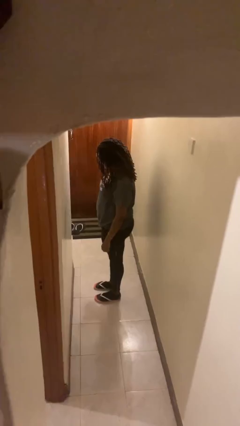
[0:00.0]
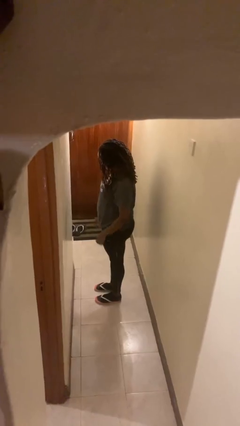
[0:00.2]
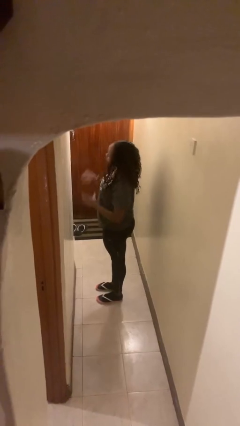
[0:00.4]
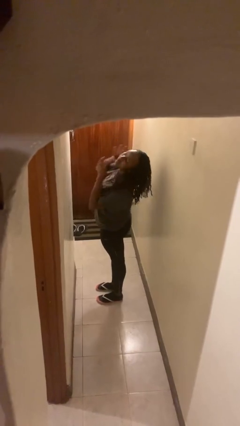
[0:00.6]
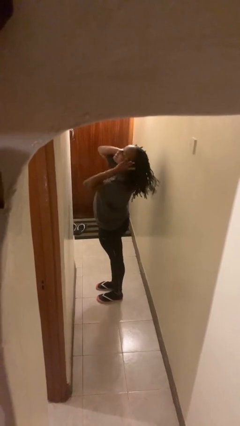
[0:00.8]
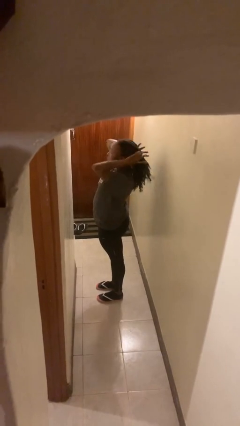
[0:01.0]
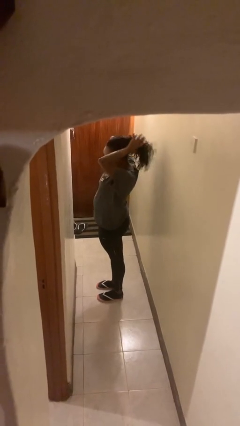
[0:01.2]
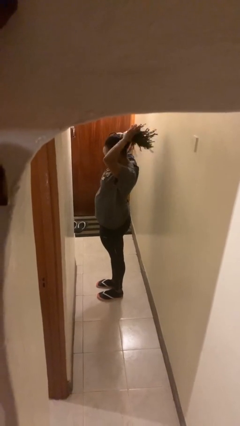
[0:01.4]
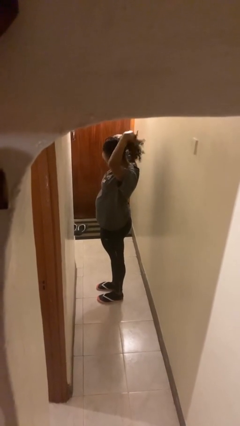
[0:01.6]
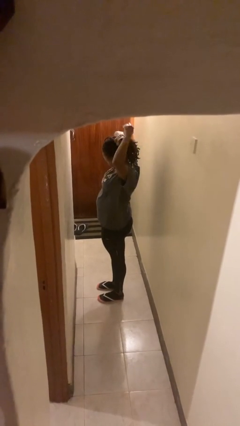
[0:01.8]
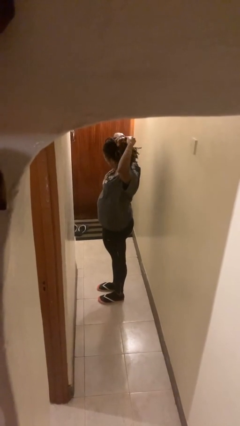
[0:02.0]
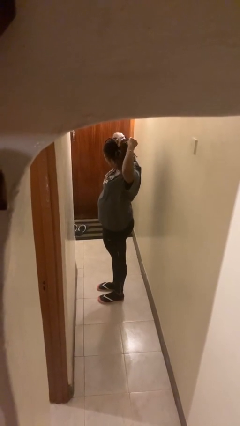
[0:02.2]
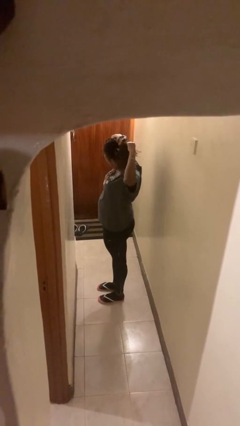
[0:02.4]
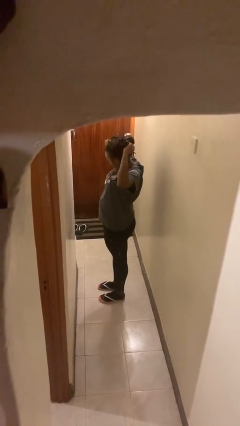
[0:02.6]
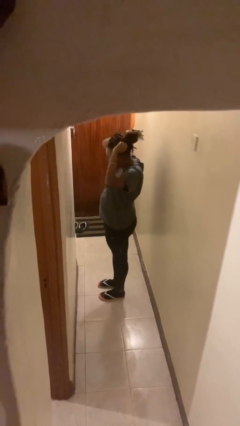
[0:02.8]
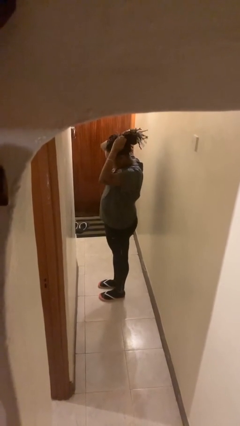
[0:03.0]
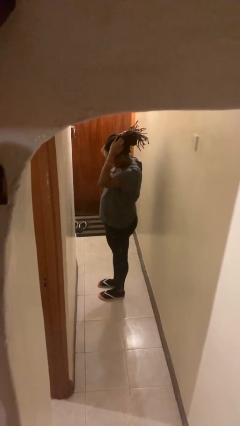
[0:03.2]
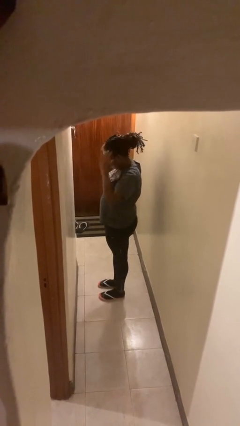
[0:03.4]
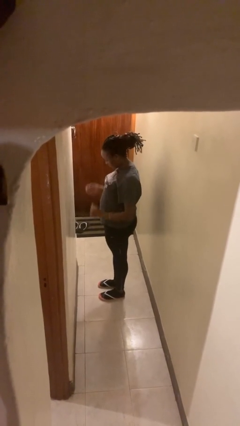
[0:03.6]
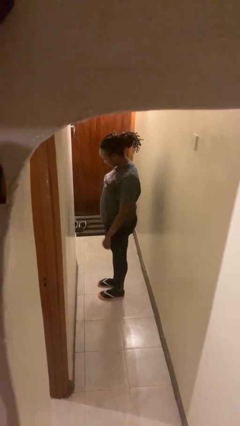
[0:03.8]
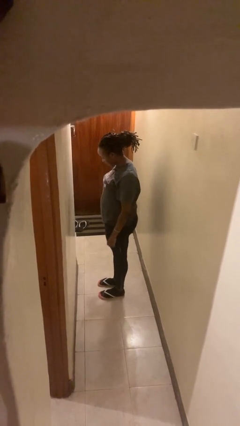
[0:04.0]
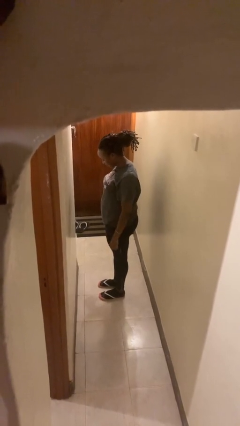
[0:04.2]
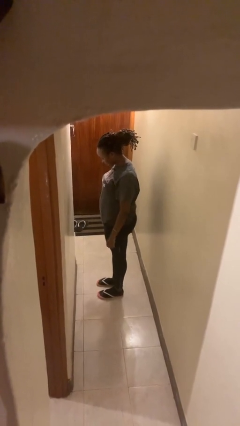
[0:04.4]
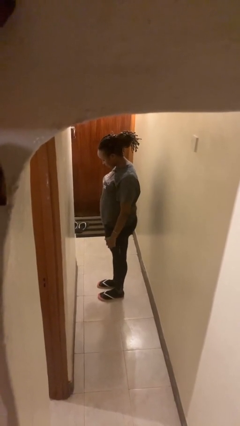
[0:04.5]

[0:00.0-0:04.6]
person puts hair in ponytail

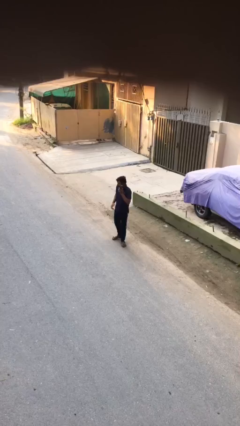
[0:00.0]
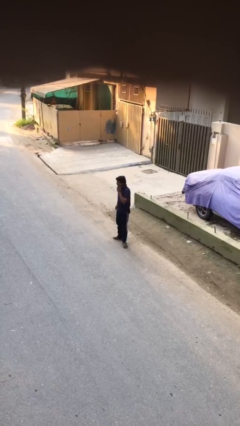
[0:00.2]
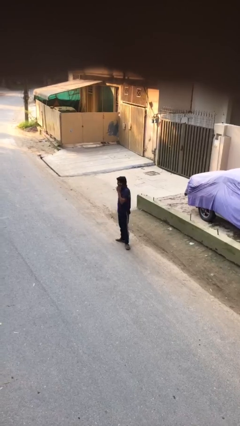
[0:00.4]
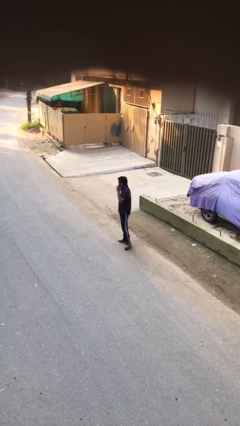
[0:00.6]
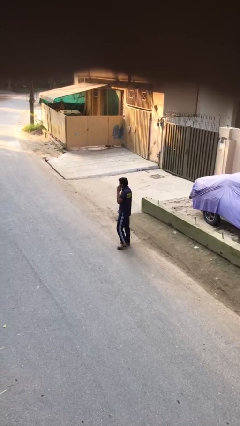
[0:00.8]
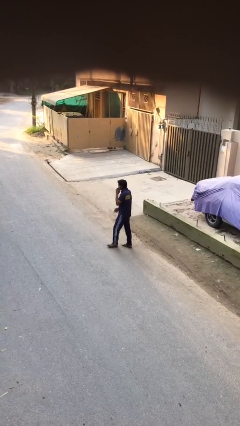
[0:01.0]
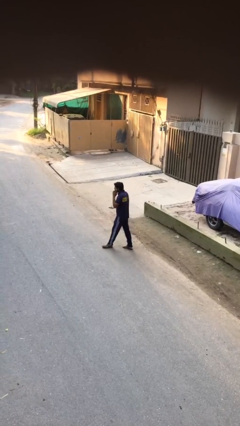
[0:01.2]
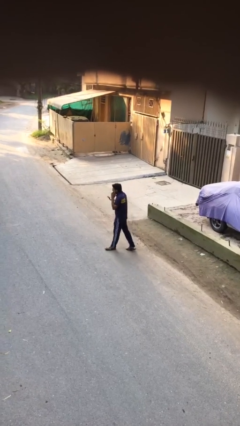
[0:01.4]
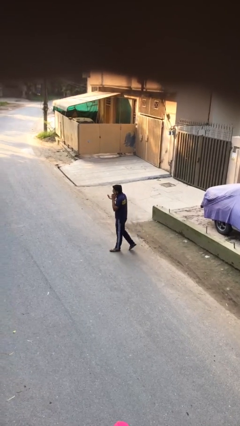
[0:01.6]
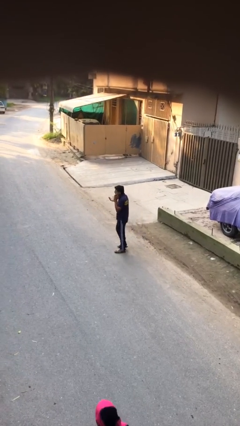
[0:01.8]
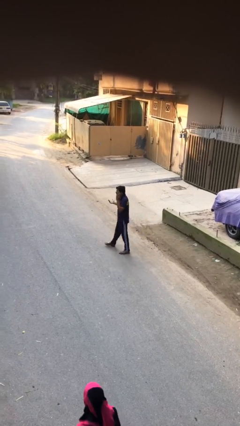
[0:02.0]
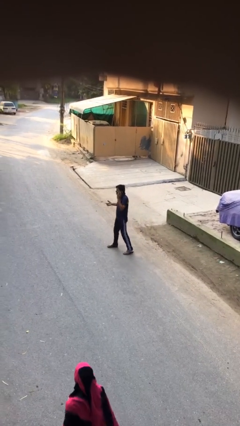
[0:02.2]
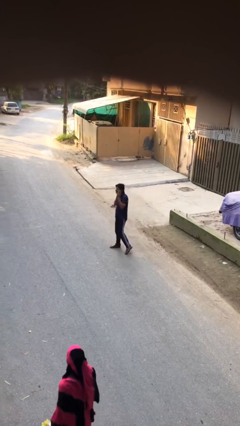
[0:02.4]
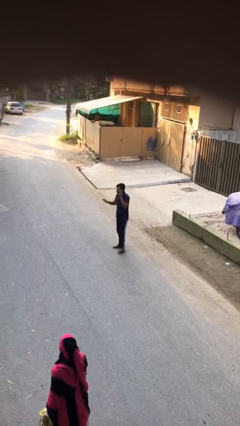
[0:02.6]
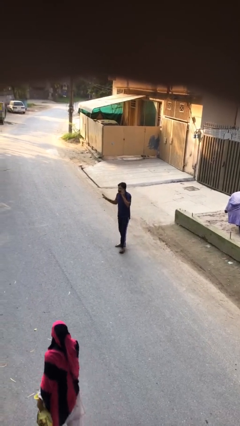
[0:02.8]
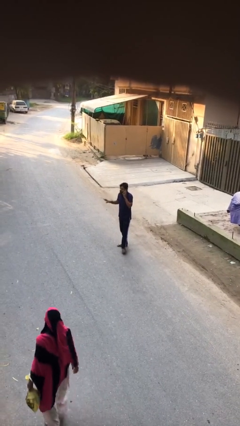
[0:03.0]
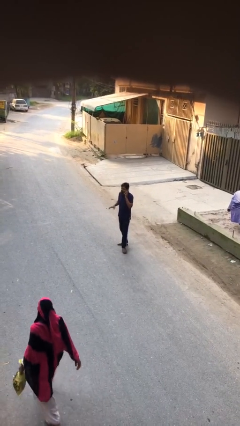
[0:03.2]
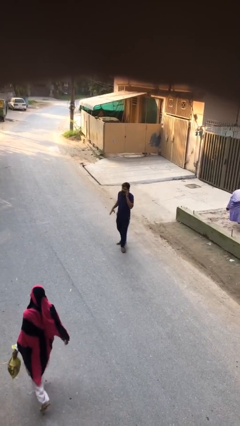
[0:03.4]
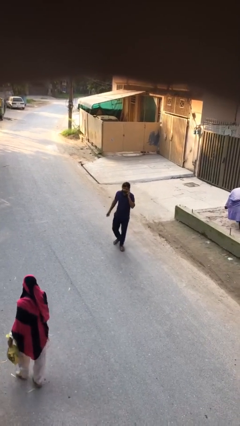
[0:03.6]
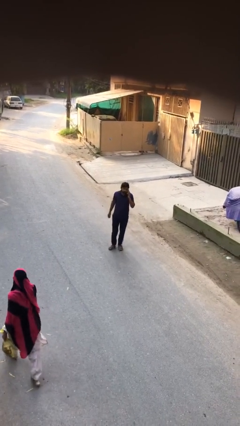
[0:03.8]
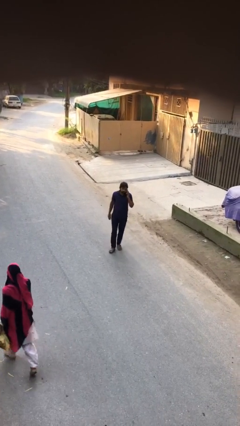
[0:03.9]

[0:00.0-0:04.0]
person talks on phone

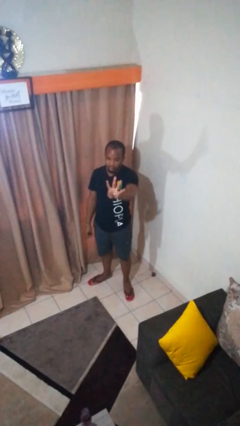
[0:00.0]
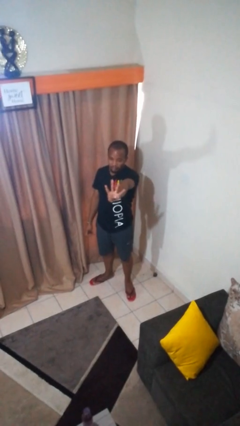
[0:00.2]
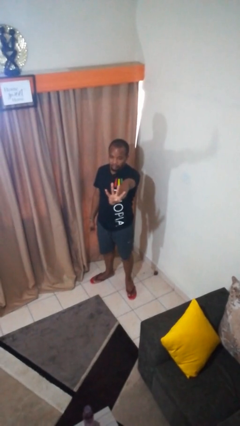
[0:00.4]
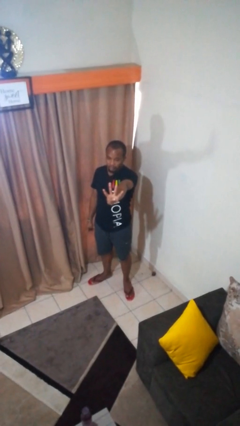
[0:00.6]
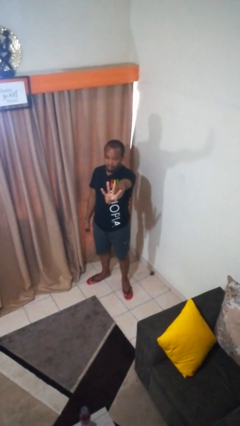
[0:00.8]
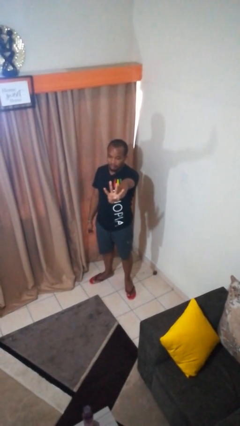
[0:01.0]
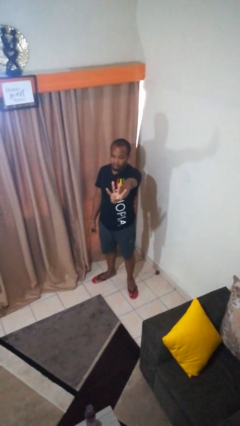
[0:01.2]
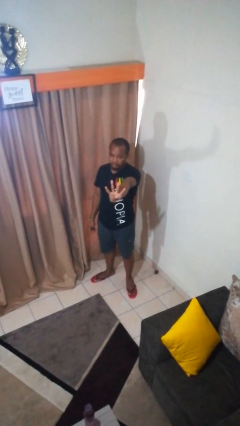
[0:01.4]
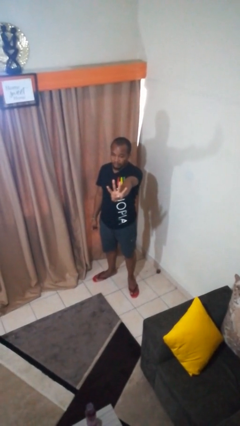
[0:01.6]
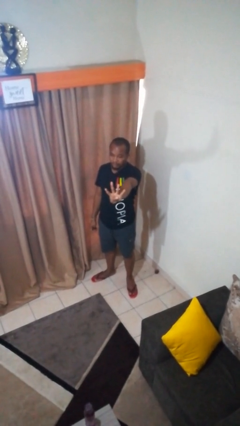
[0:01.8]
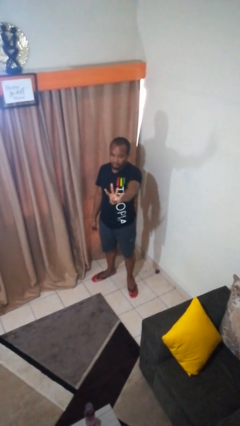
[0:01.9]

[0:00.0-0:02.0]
person gestures number four

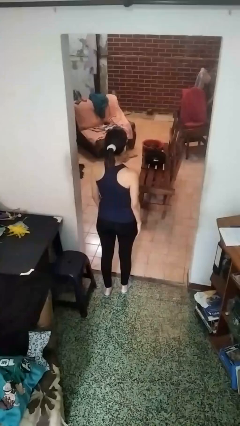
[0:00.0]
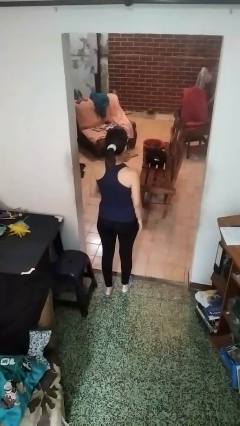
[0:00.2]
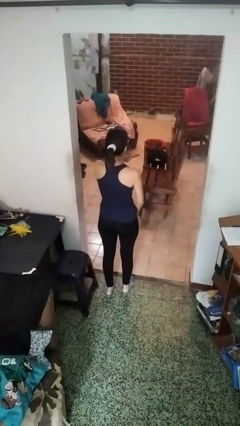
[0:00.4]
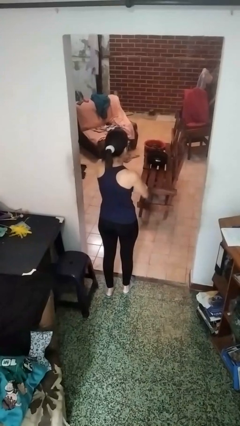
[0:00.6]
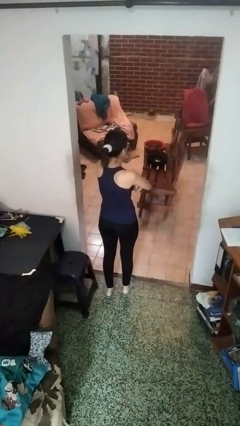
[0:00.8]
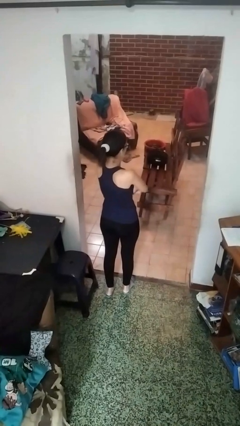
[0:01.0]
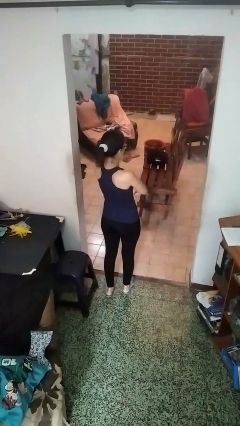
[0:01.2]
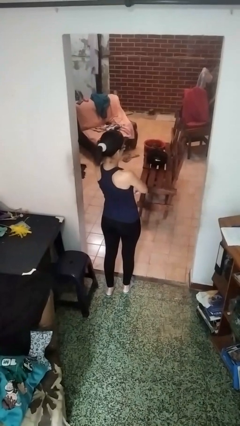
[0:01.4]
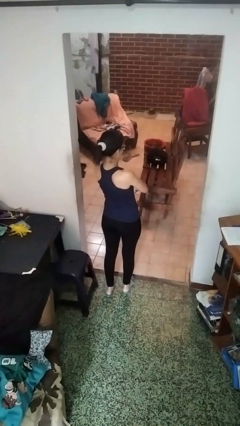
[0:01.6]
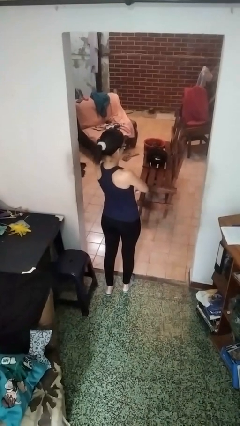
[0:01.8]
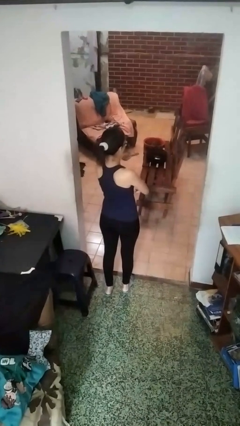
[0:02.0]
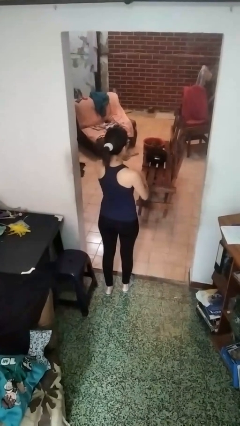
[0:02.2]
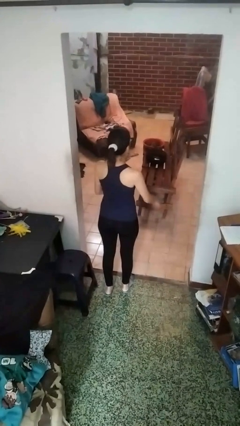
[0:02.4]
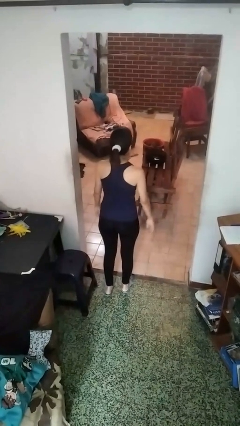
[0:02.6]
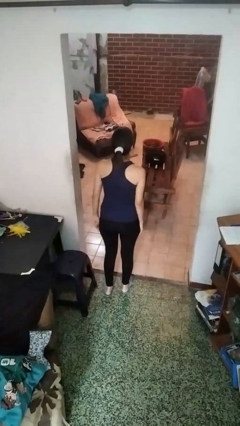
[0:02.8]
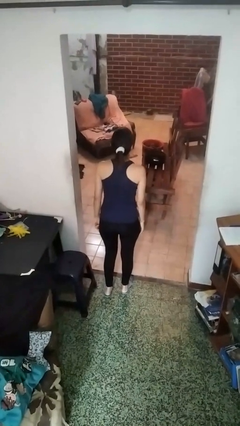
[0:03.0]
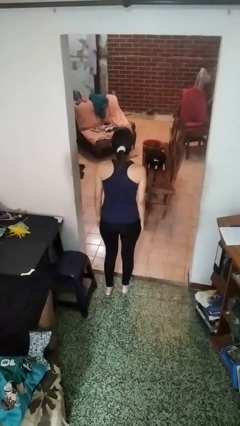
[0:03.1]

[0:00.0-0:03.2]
person gestures arms x

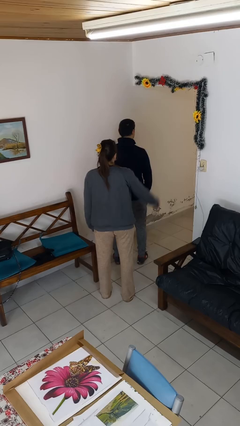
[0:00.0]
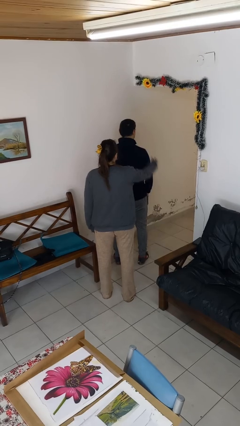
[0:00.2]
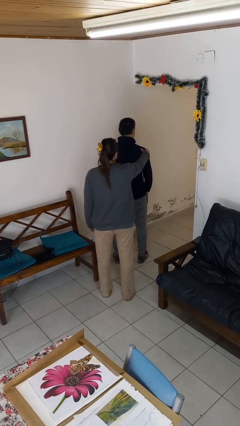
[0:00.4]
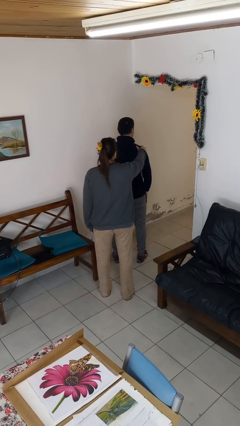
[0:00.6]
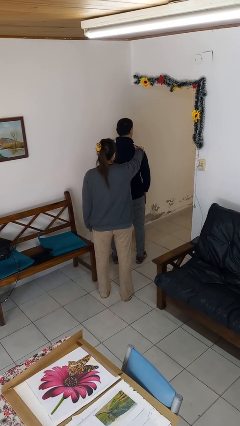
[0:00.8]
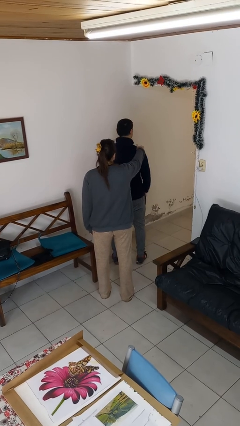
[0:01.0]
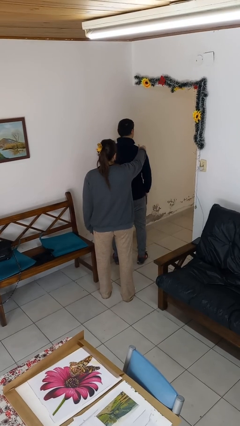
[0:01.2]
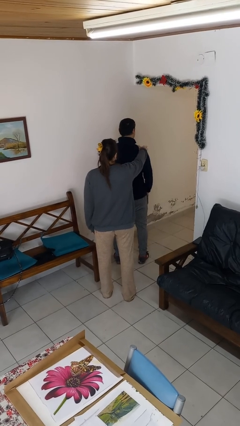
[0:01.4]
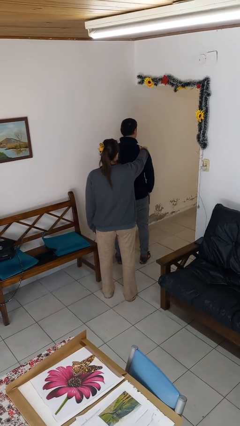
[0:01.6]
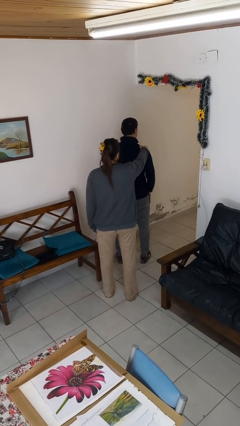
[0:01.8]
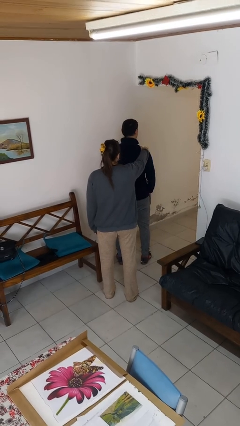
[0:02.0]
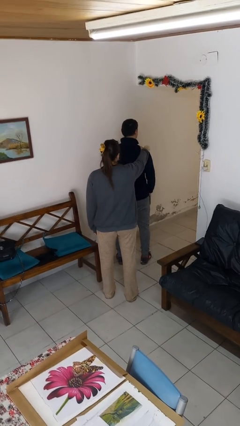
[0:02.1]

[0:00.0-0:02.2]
person touches back of person

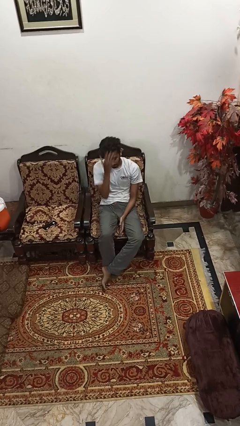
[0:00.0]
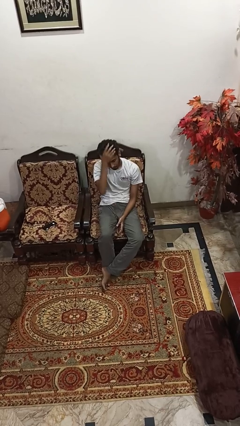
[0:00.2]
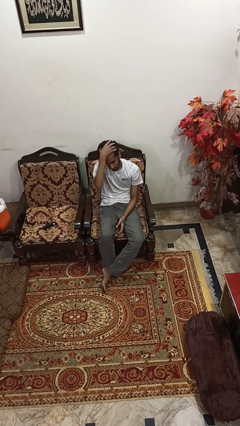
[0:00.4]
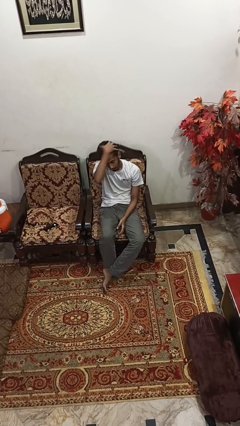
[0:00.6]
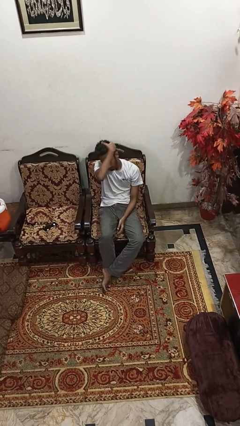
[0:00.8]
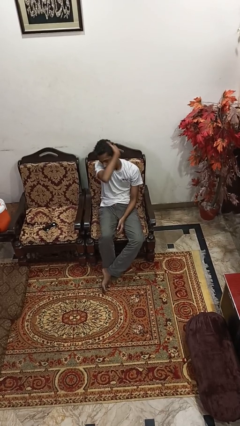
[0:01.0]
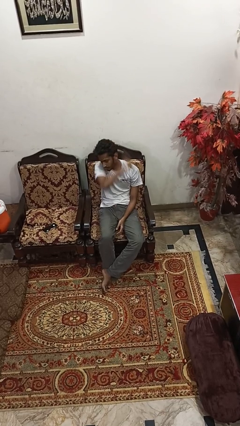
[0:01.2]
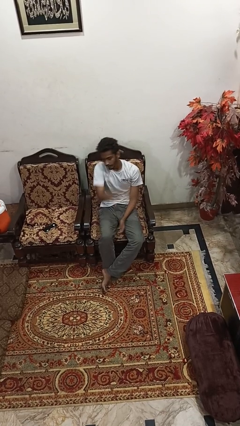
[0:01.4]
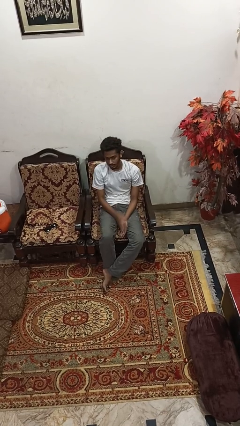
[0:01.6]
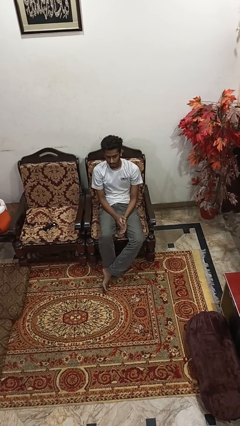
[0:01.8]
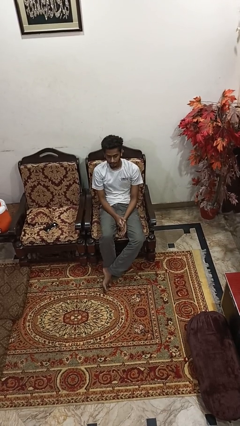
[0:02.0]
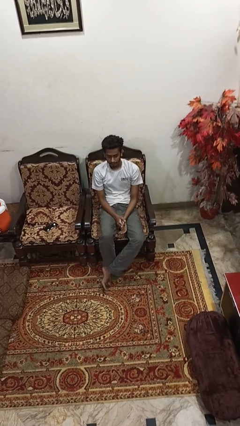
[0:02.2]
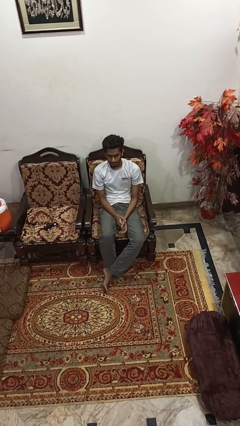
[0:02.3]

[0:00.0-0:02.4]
person strokes hair
